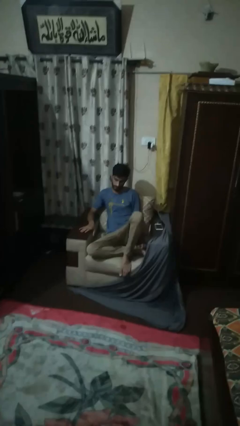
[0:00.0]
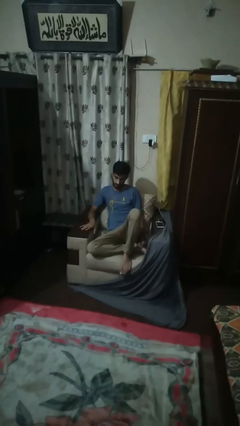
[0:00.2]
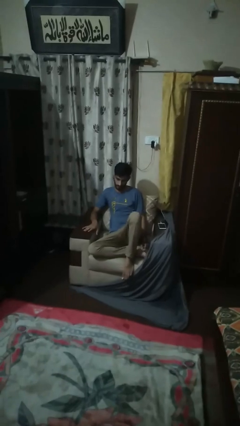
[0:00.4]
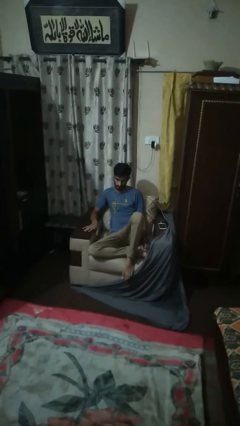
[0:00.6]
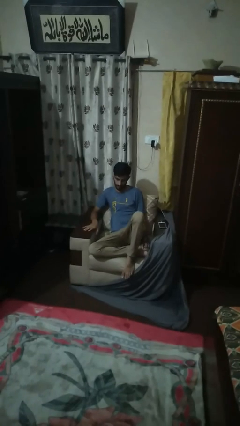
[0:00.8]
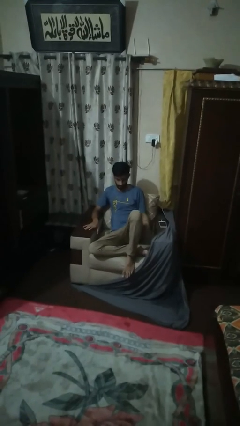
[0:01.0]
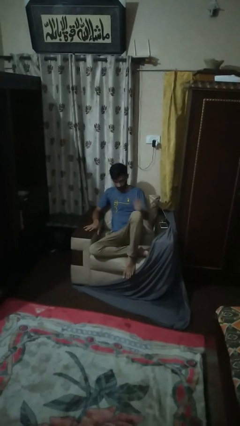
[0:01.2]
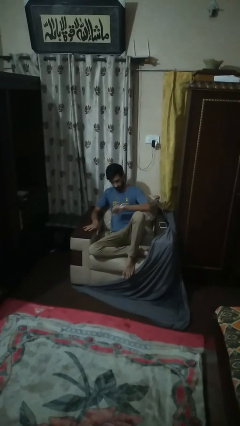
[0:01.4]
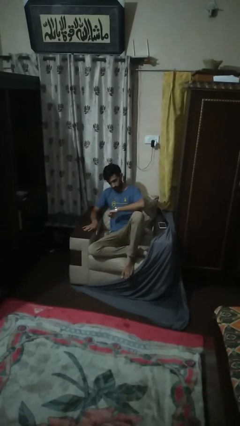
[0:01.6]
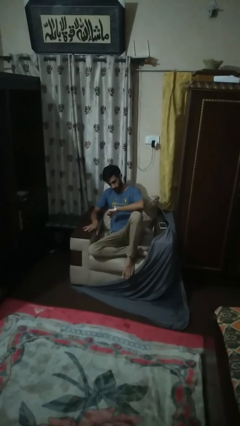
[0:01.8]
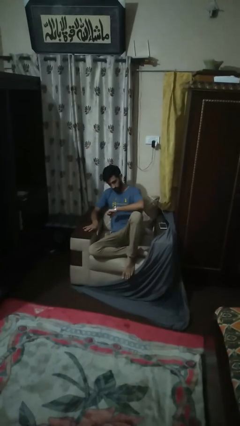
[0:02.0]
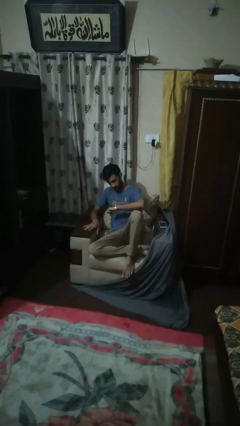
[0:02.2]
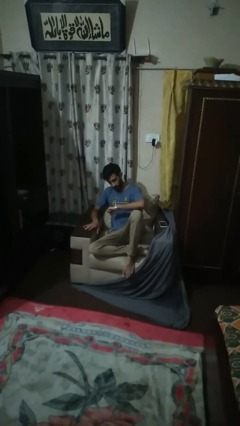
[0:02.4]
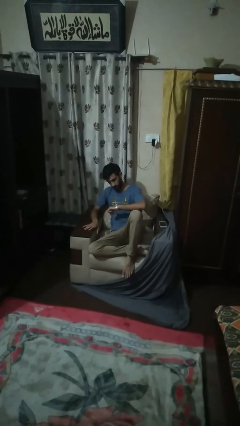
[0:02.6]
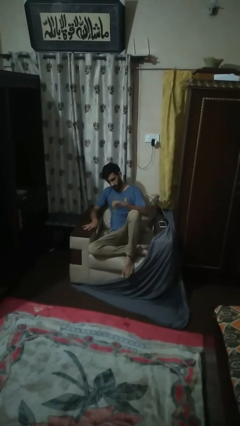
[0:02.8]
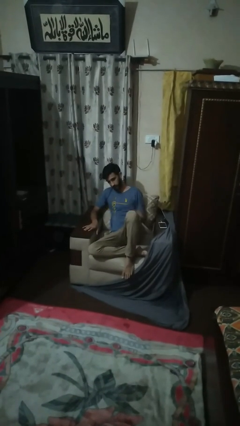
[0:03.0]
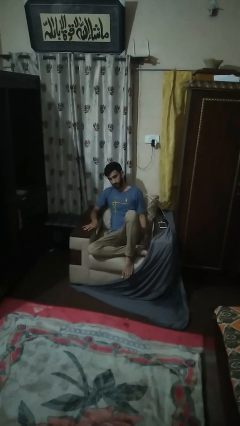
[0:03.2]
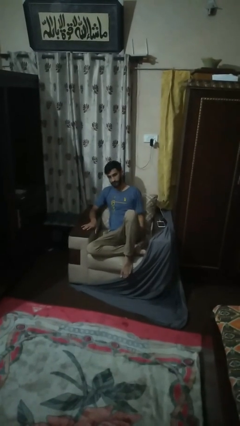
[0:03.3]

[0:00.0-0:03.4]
person looks at wristwatch

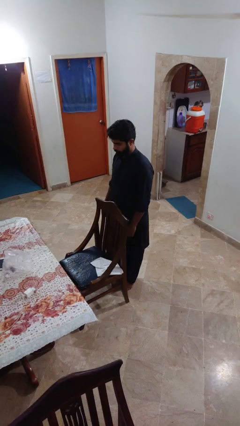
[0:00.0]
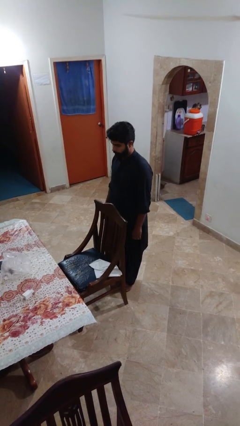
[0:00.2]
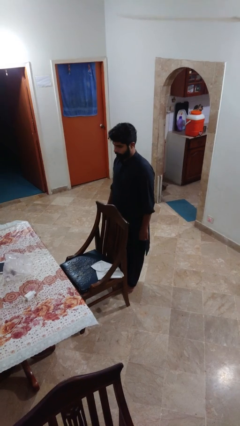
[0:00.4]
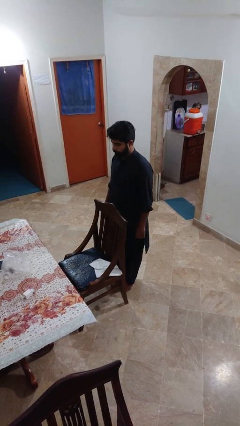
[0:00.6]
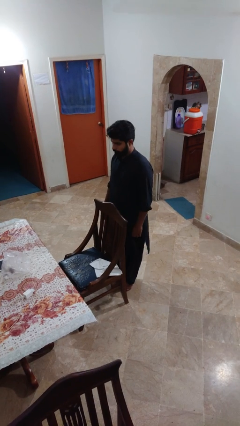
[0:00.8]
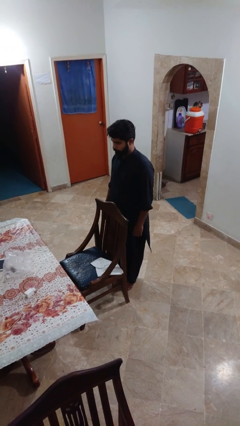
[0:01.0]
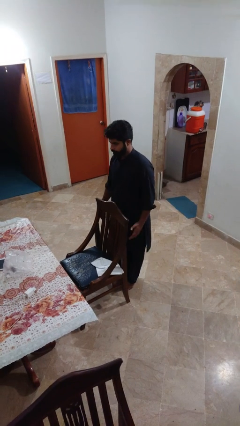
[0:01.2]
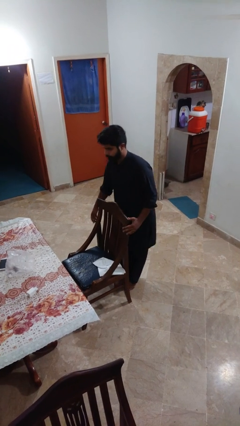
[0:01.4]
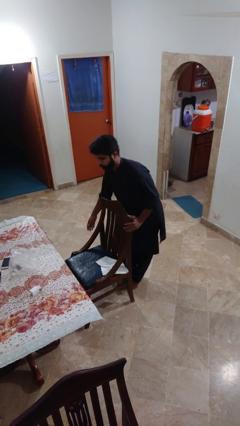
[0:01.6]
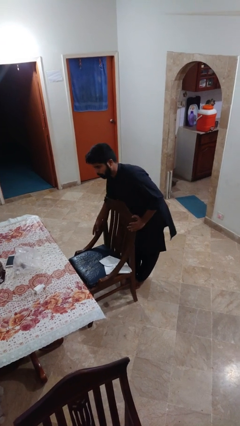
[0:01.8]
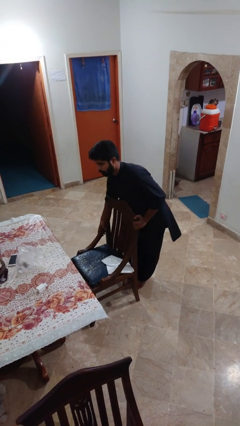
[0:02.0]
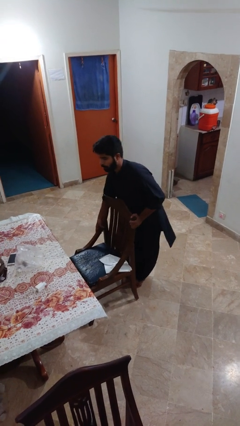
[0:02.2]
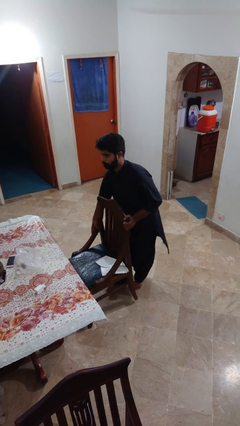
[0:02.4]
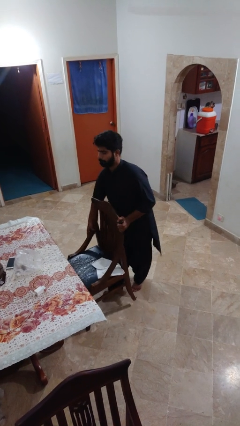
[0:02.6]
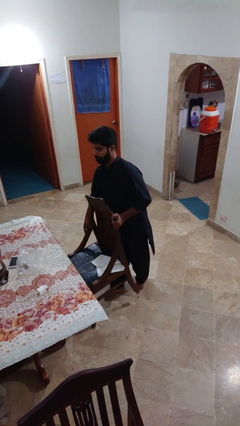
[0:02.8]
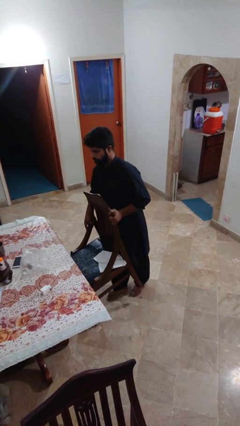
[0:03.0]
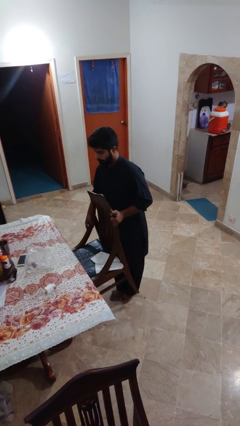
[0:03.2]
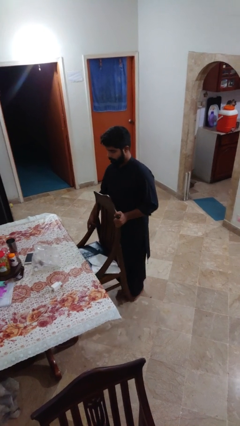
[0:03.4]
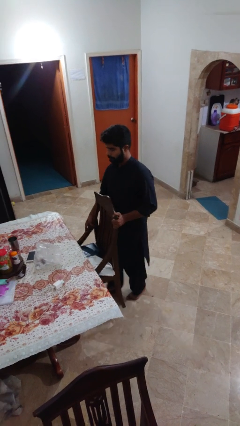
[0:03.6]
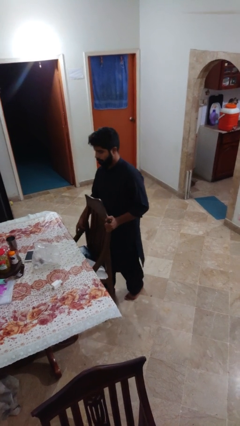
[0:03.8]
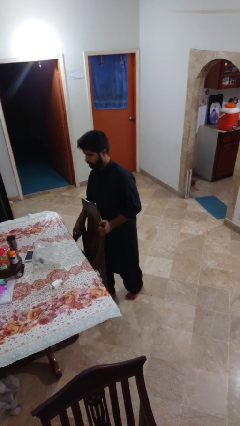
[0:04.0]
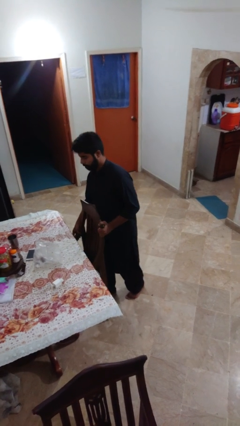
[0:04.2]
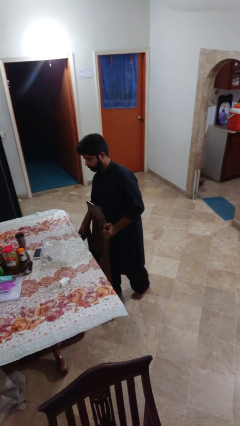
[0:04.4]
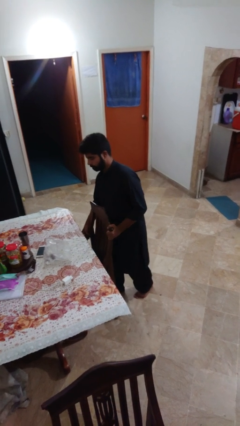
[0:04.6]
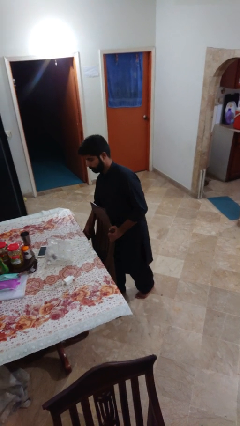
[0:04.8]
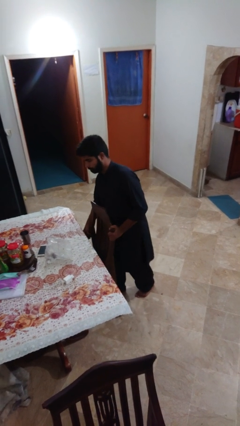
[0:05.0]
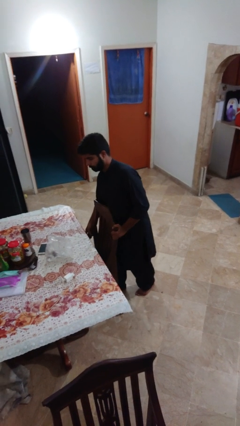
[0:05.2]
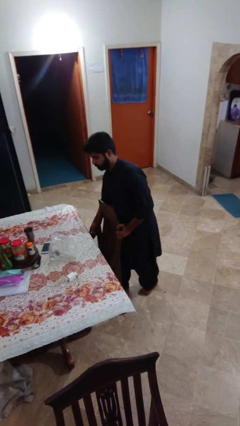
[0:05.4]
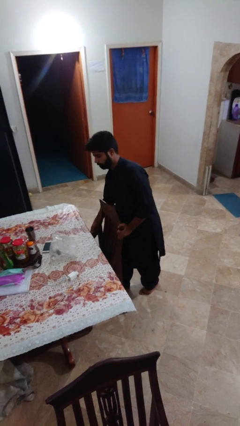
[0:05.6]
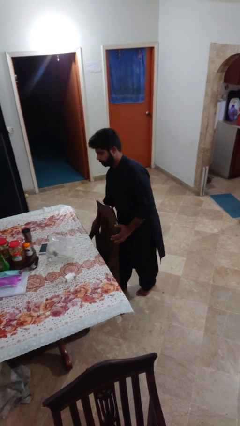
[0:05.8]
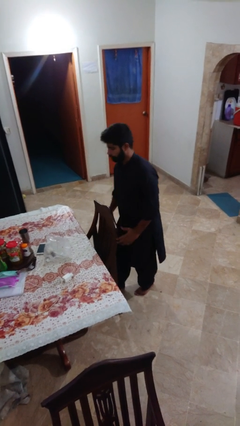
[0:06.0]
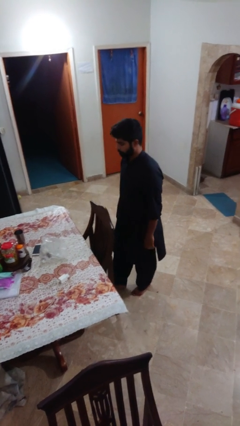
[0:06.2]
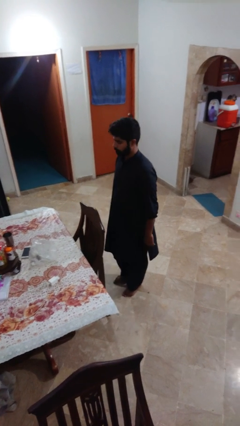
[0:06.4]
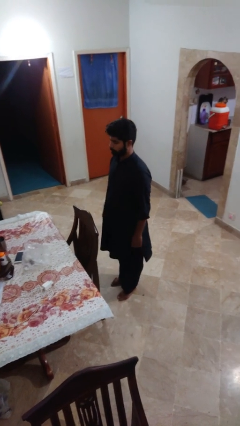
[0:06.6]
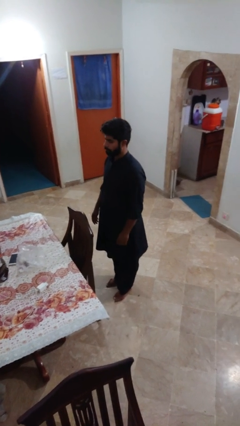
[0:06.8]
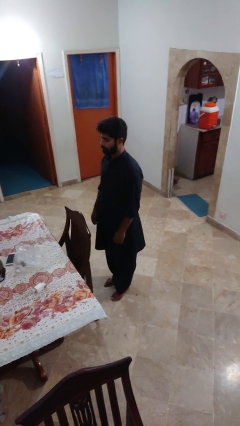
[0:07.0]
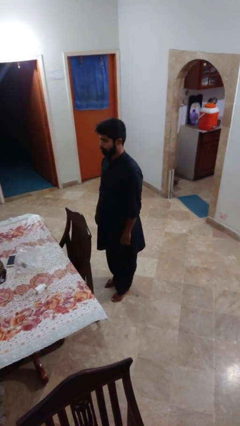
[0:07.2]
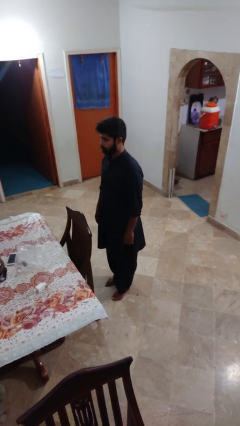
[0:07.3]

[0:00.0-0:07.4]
person pushes in chair

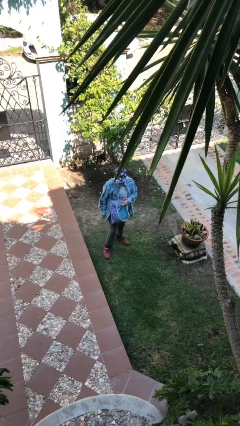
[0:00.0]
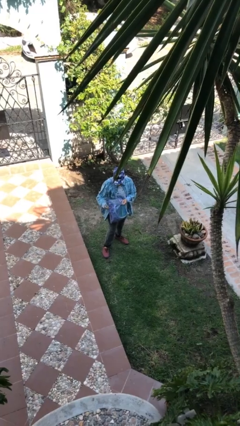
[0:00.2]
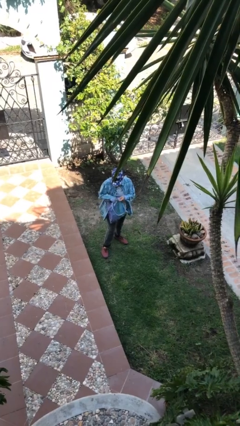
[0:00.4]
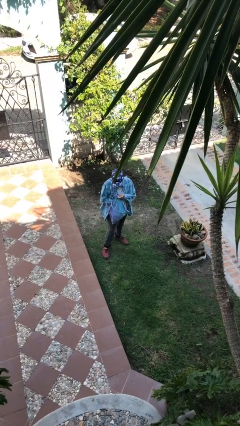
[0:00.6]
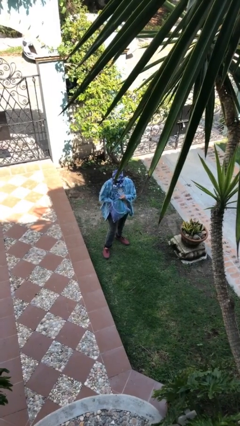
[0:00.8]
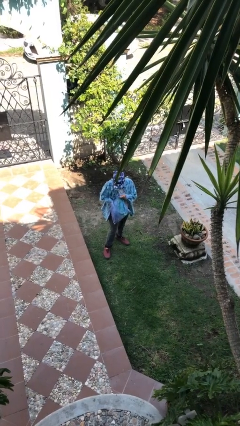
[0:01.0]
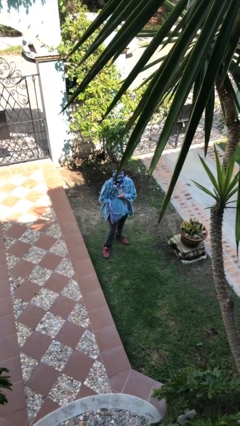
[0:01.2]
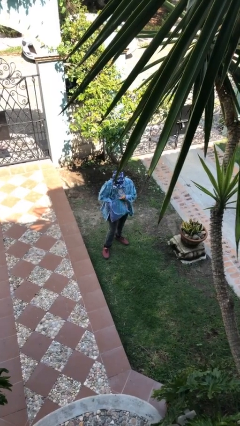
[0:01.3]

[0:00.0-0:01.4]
person searches in purse

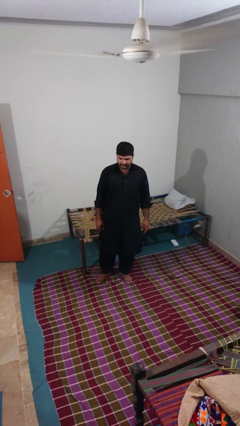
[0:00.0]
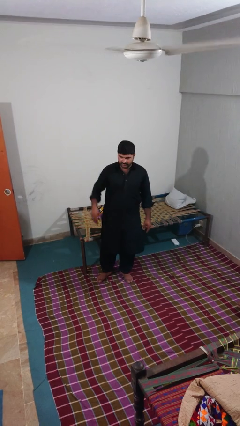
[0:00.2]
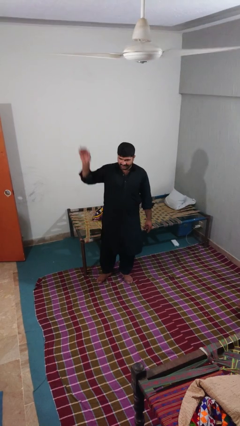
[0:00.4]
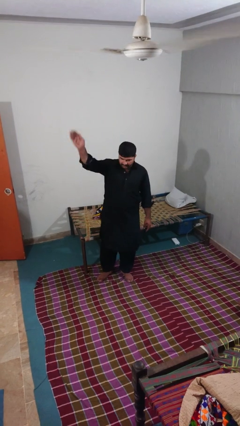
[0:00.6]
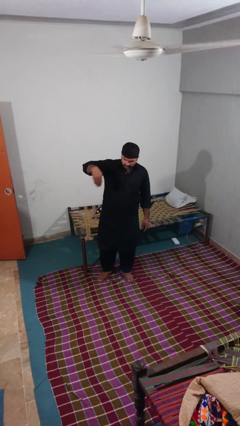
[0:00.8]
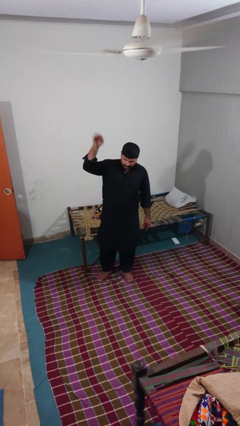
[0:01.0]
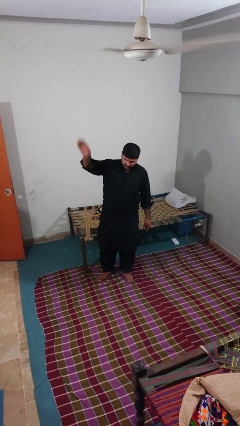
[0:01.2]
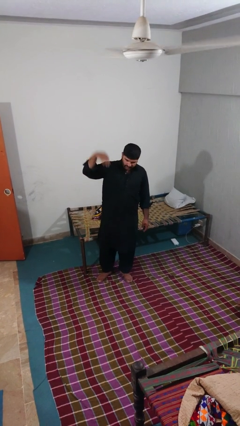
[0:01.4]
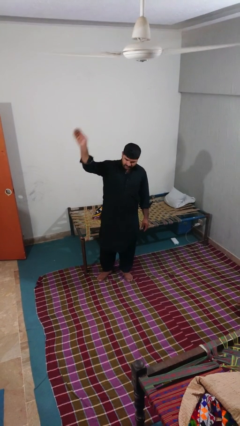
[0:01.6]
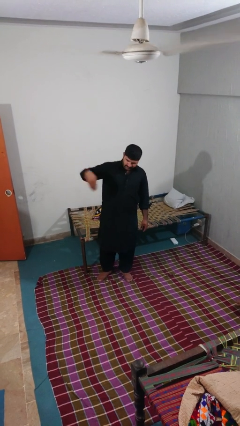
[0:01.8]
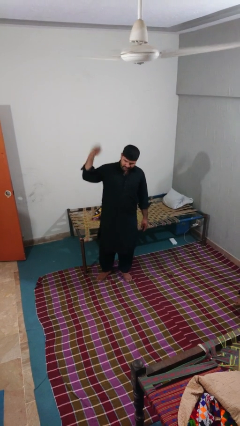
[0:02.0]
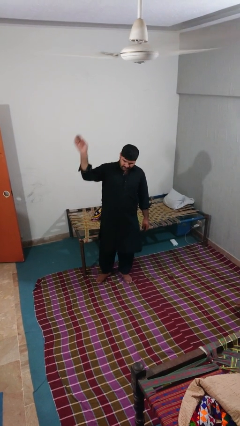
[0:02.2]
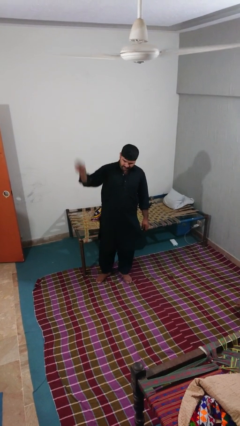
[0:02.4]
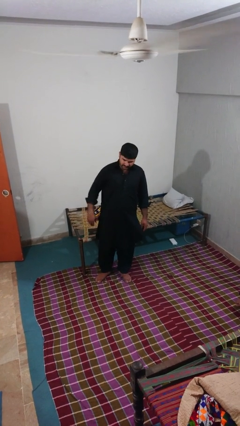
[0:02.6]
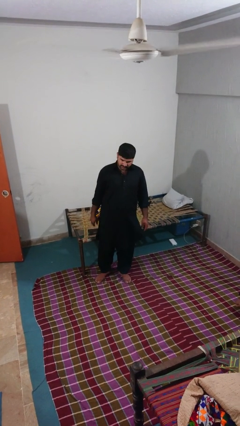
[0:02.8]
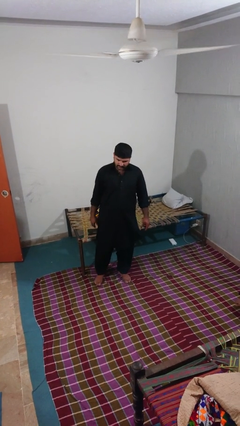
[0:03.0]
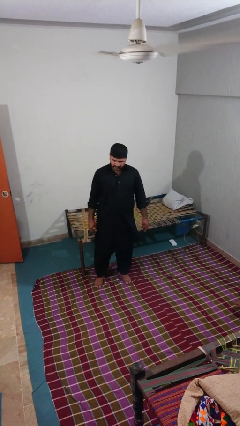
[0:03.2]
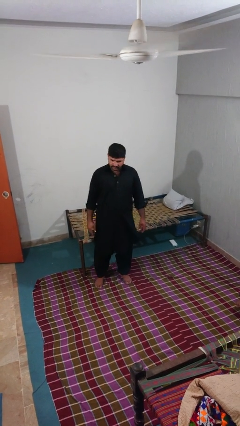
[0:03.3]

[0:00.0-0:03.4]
person gestures come here

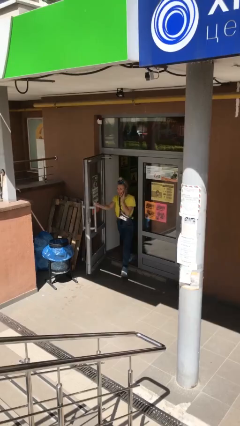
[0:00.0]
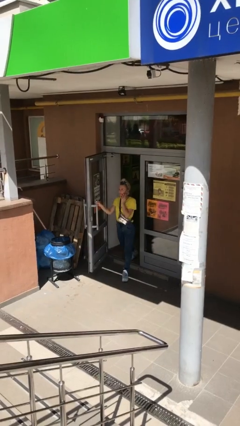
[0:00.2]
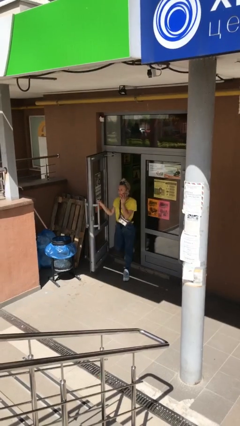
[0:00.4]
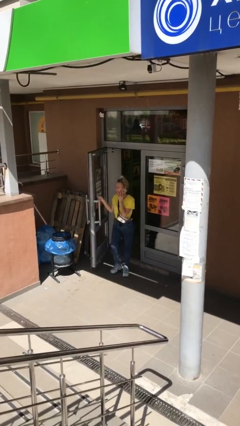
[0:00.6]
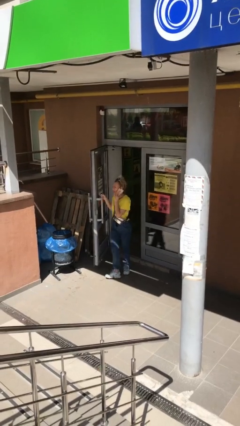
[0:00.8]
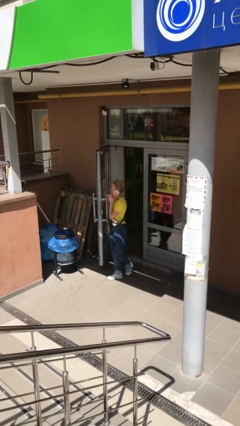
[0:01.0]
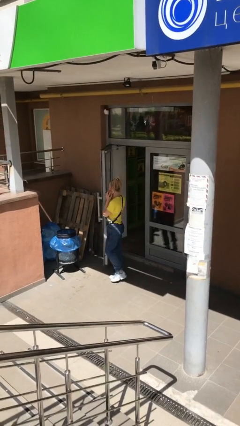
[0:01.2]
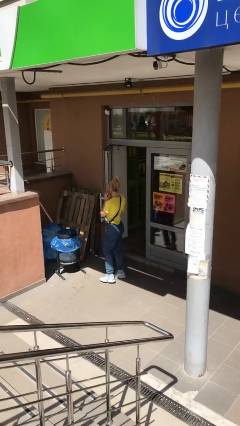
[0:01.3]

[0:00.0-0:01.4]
person enters scene through structure

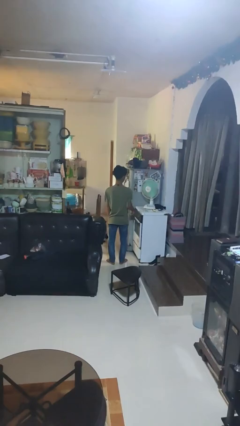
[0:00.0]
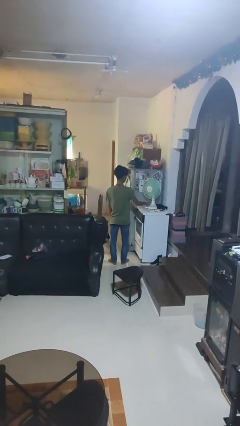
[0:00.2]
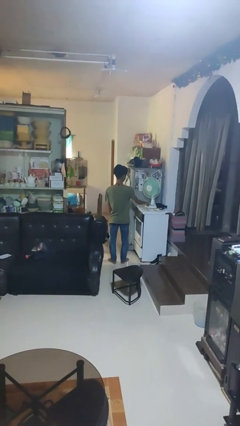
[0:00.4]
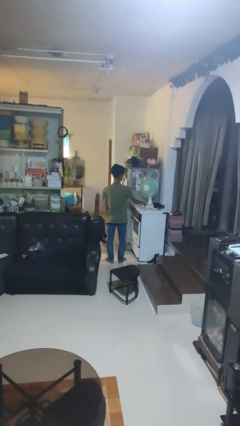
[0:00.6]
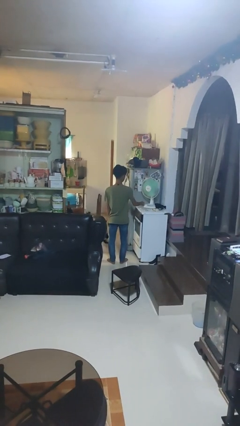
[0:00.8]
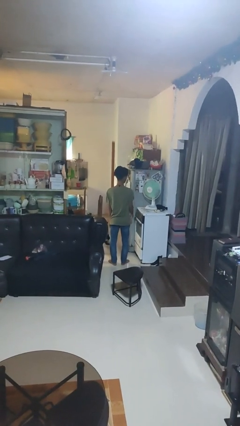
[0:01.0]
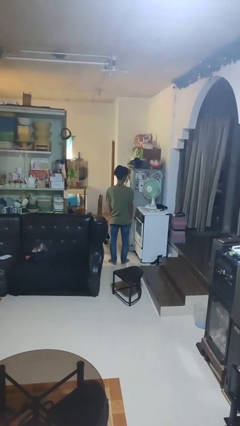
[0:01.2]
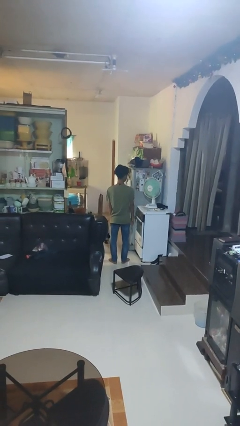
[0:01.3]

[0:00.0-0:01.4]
person turns off fan
